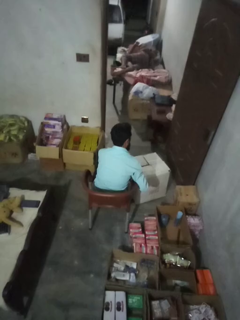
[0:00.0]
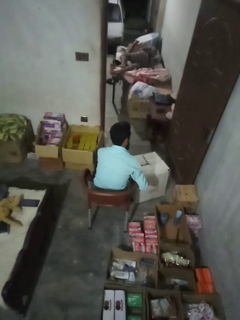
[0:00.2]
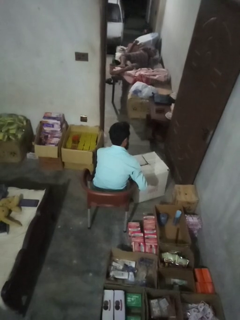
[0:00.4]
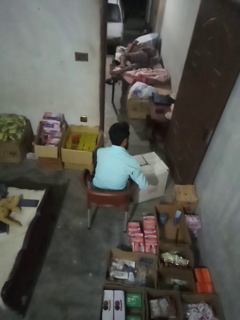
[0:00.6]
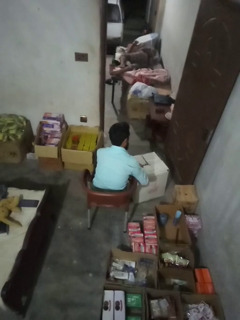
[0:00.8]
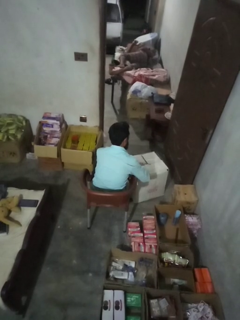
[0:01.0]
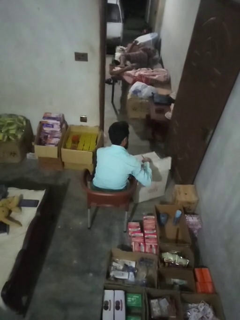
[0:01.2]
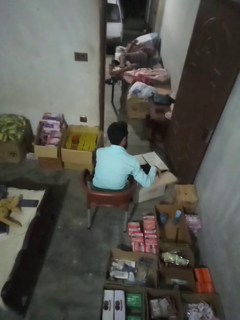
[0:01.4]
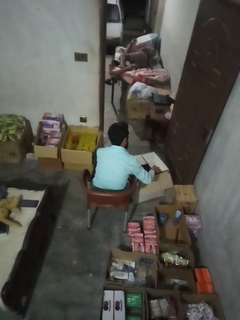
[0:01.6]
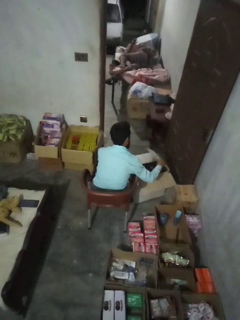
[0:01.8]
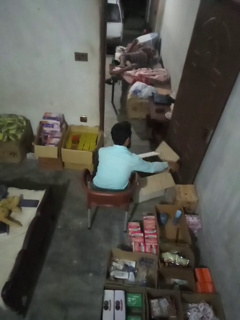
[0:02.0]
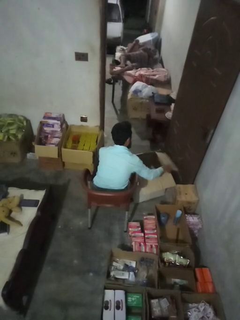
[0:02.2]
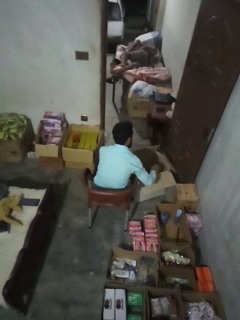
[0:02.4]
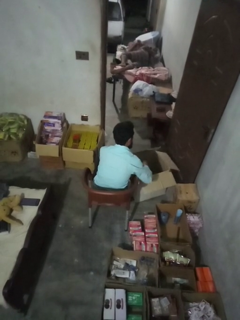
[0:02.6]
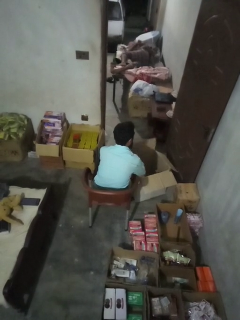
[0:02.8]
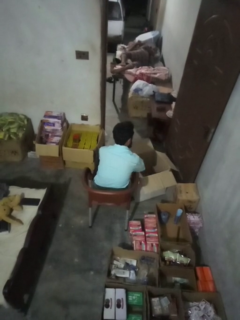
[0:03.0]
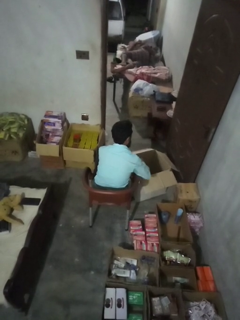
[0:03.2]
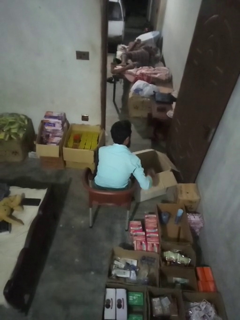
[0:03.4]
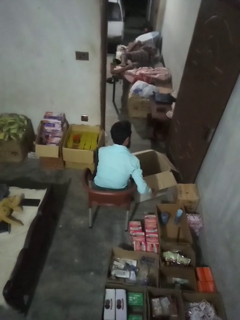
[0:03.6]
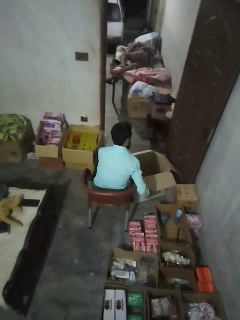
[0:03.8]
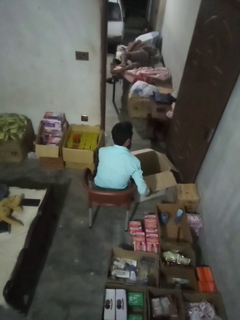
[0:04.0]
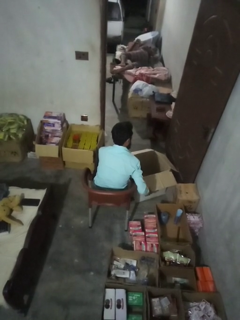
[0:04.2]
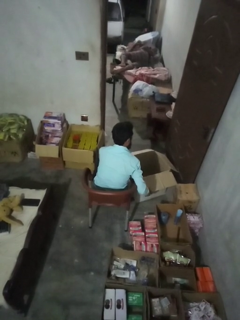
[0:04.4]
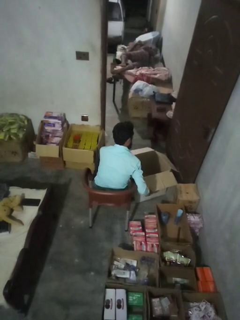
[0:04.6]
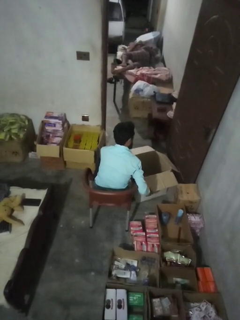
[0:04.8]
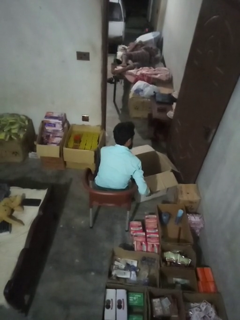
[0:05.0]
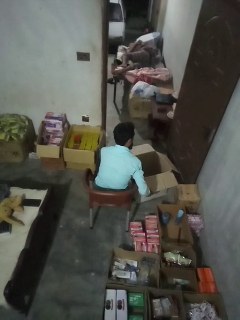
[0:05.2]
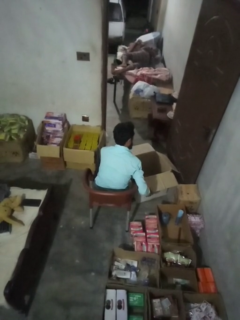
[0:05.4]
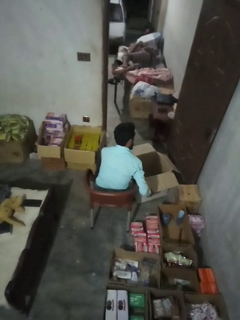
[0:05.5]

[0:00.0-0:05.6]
person opens box

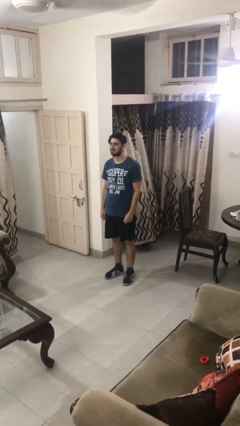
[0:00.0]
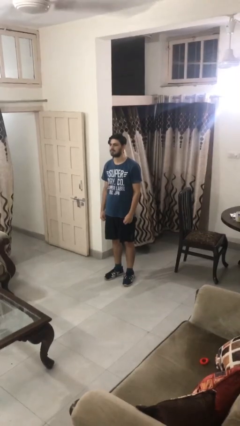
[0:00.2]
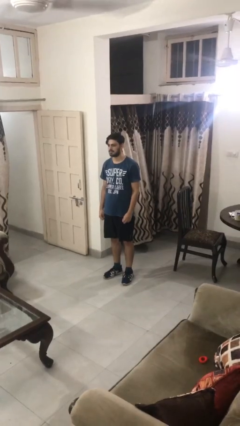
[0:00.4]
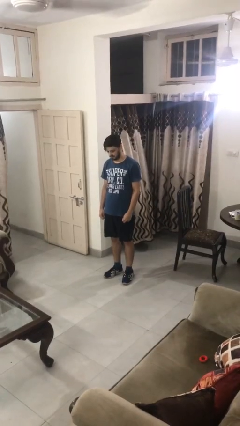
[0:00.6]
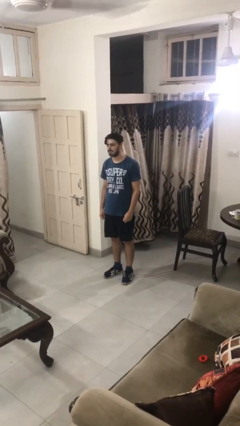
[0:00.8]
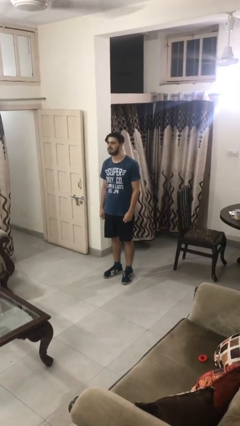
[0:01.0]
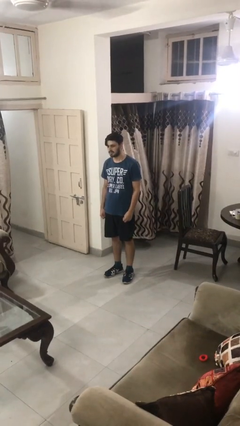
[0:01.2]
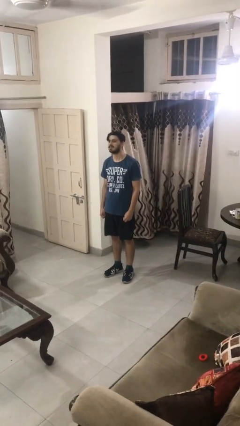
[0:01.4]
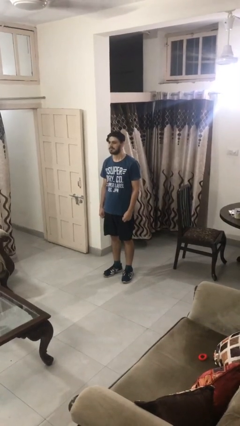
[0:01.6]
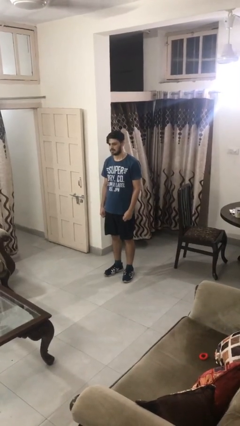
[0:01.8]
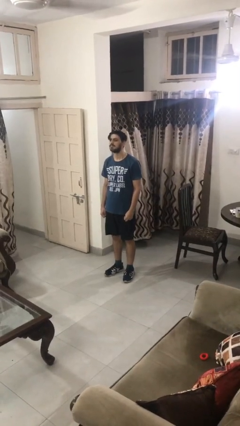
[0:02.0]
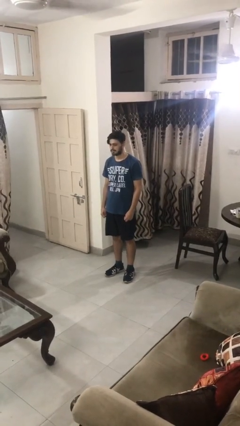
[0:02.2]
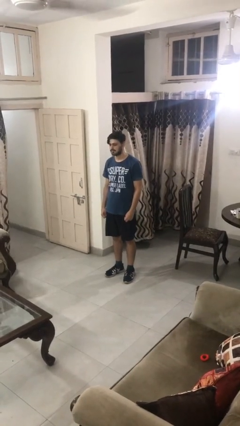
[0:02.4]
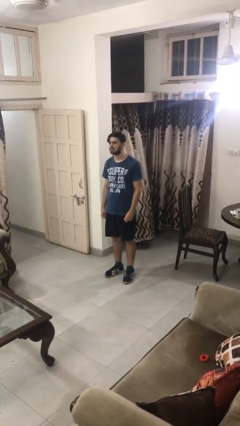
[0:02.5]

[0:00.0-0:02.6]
person nods head

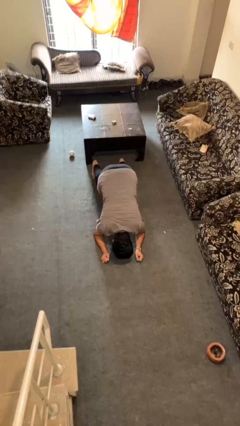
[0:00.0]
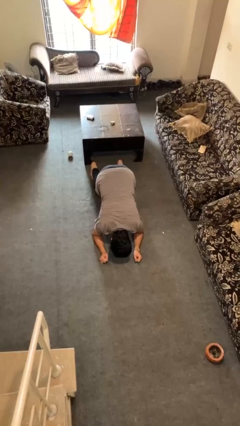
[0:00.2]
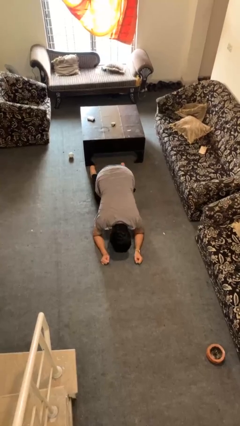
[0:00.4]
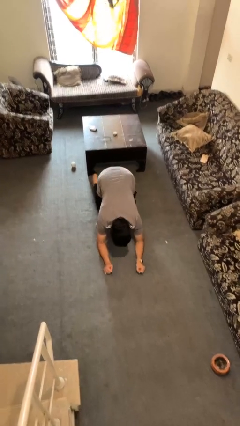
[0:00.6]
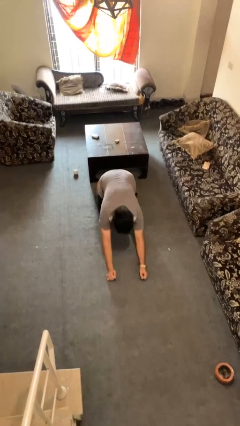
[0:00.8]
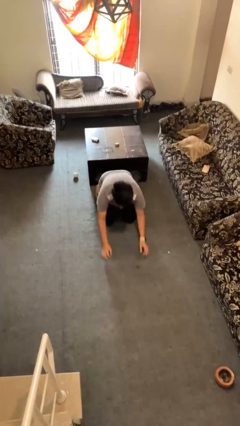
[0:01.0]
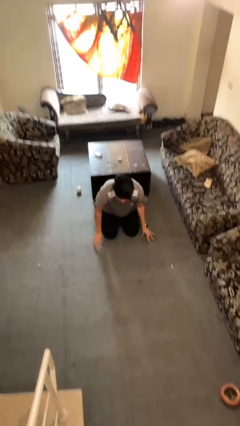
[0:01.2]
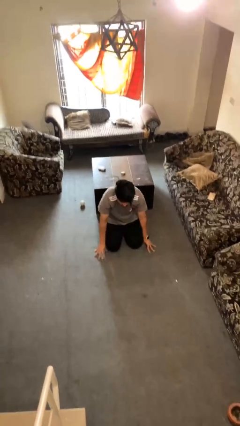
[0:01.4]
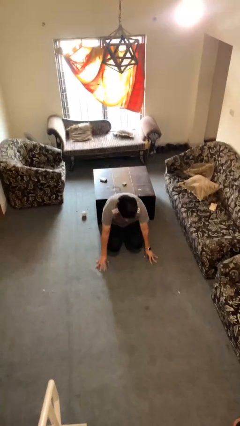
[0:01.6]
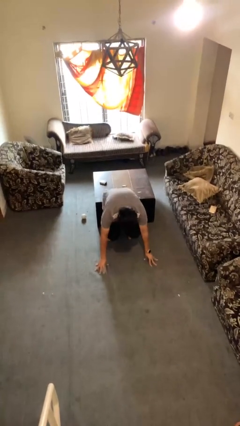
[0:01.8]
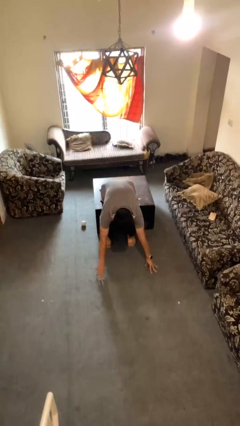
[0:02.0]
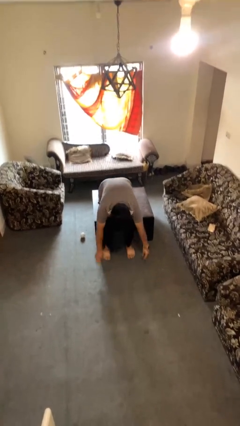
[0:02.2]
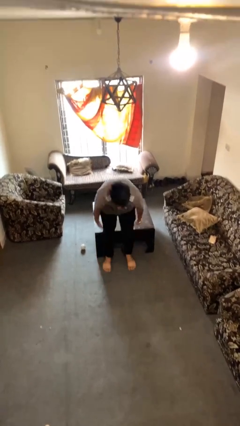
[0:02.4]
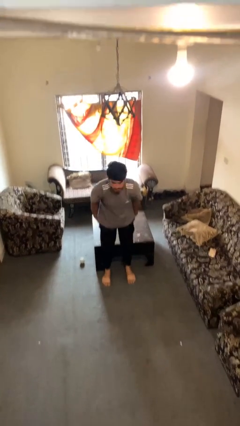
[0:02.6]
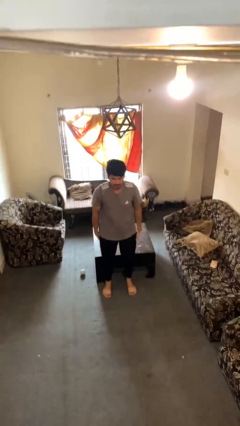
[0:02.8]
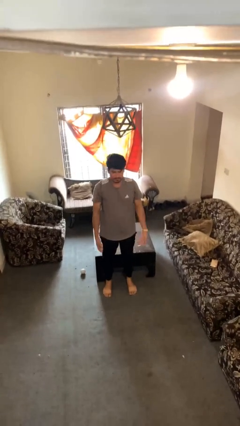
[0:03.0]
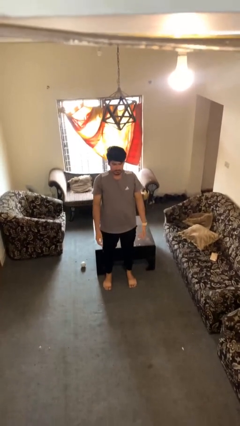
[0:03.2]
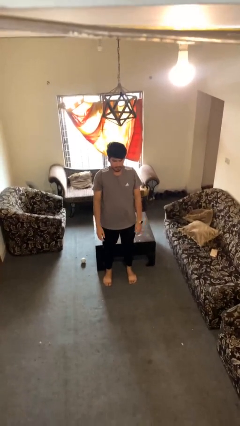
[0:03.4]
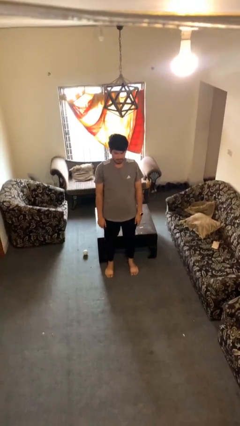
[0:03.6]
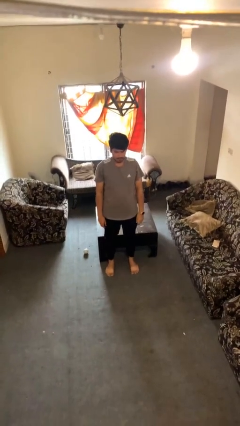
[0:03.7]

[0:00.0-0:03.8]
person stands up from floor

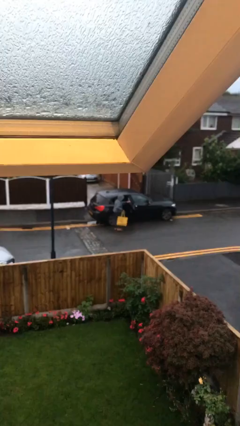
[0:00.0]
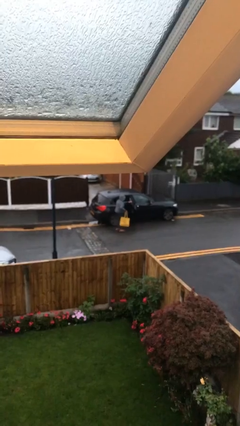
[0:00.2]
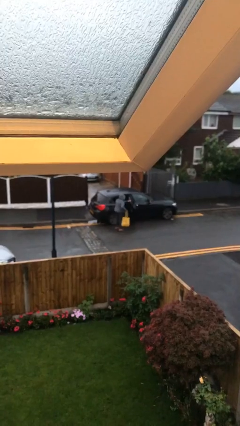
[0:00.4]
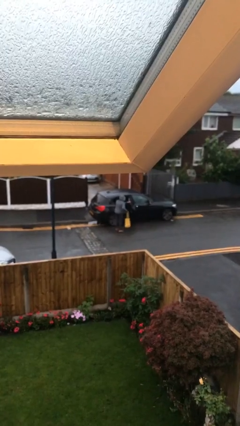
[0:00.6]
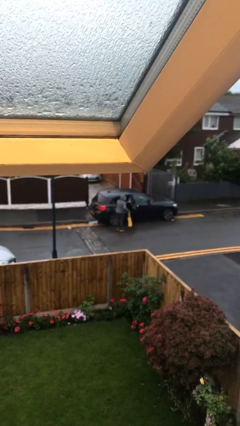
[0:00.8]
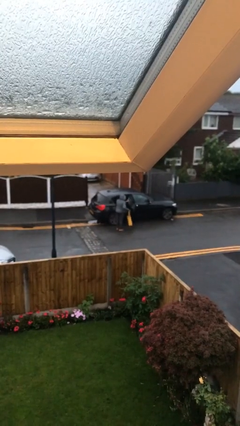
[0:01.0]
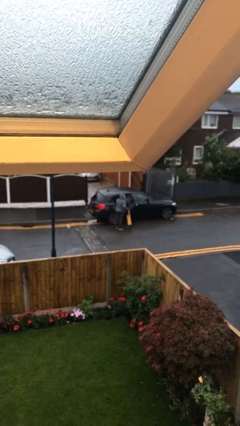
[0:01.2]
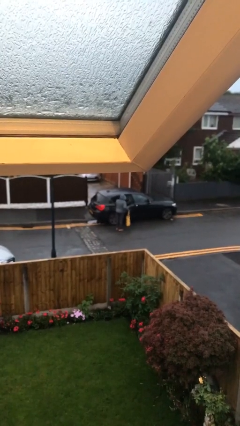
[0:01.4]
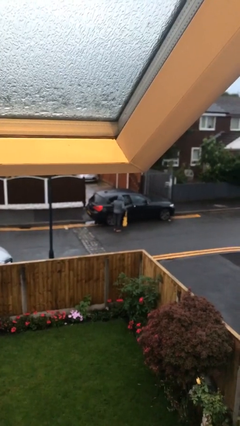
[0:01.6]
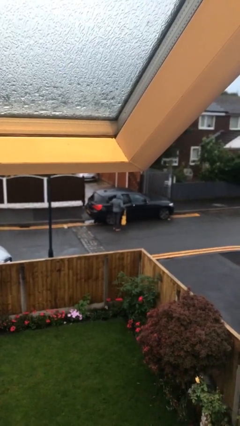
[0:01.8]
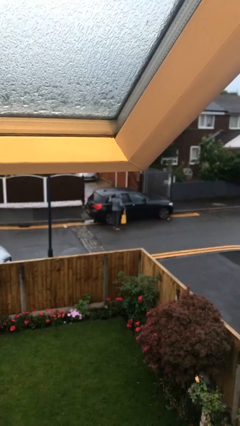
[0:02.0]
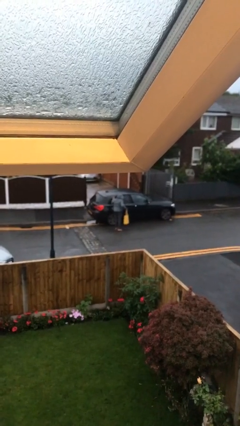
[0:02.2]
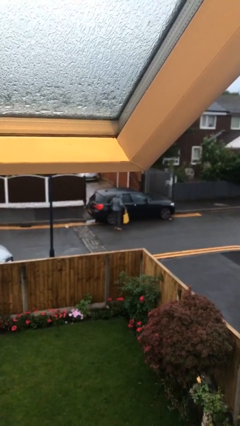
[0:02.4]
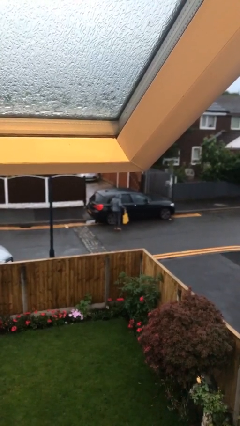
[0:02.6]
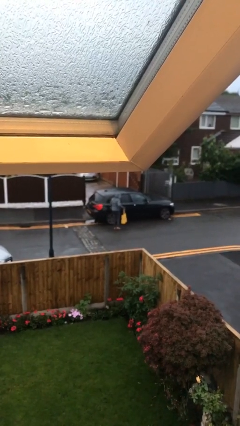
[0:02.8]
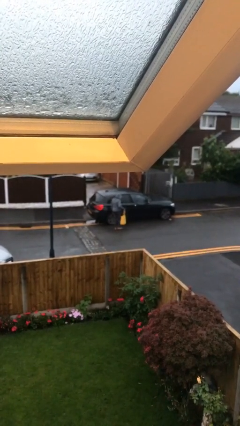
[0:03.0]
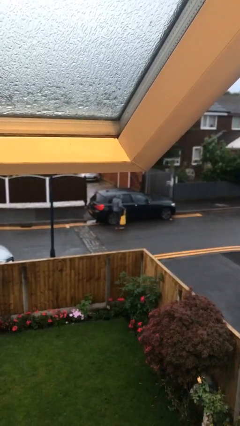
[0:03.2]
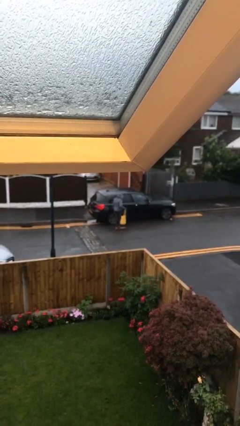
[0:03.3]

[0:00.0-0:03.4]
person closes car door

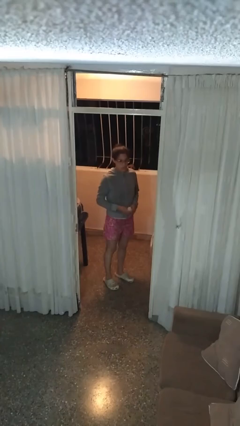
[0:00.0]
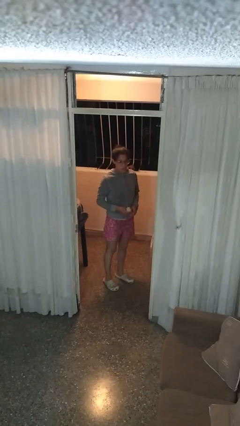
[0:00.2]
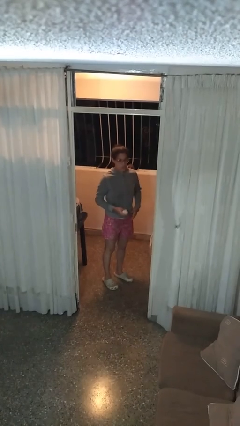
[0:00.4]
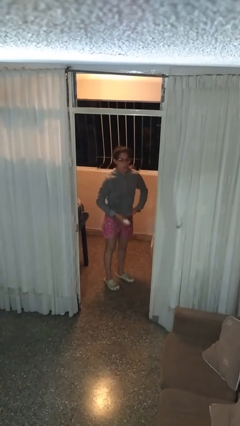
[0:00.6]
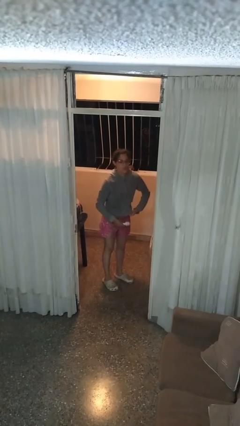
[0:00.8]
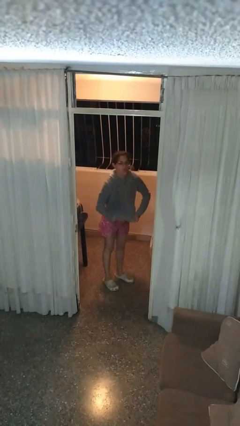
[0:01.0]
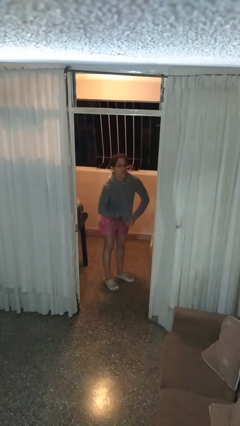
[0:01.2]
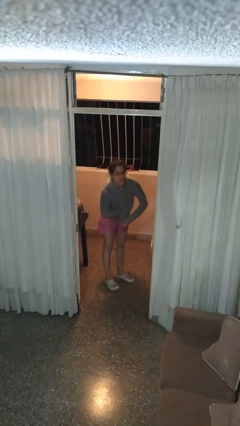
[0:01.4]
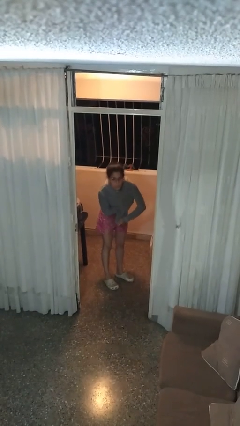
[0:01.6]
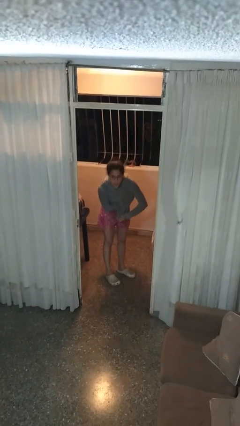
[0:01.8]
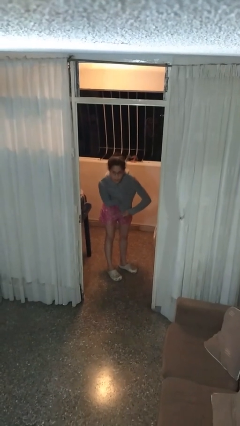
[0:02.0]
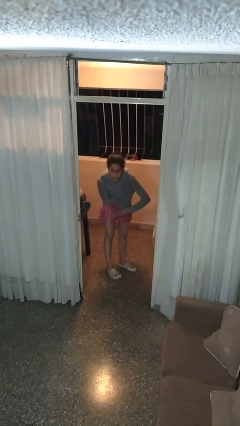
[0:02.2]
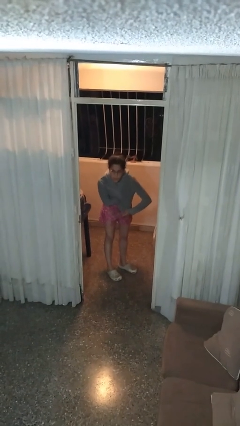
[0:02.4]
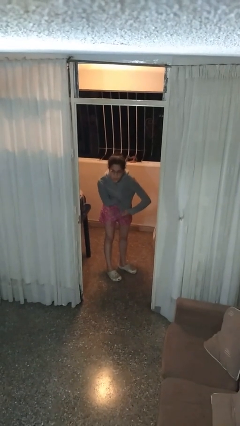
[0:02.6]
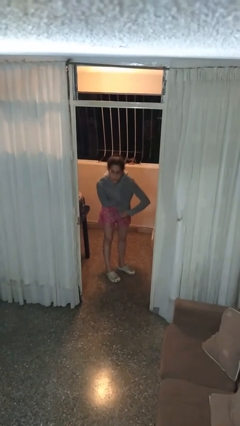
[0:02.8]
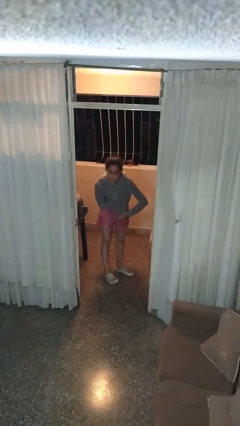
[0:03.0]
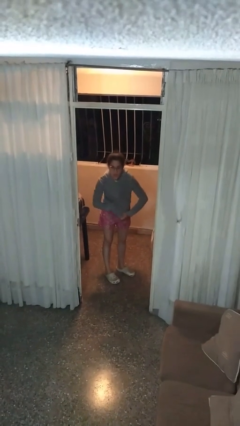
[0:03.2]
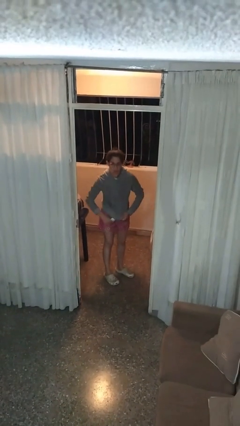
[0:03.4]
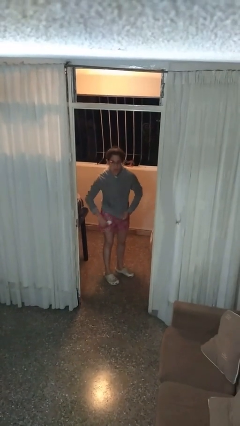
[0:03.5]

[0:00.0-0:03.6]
person applies deodorant
